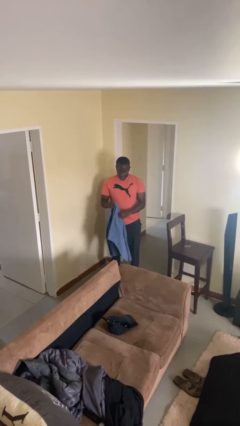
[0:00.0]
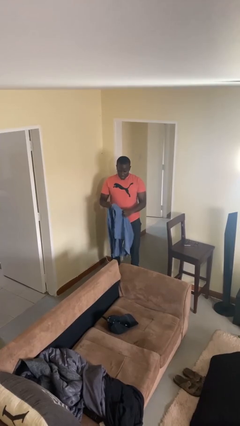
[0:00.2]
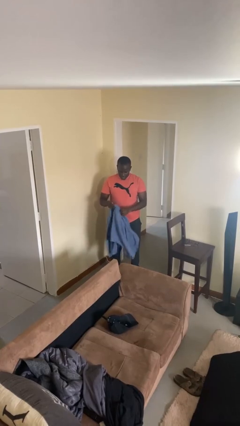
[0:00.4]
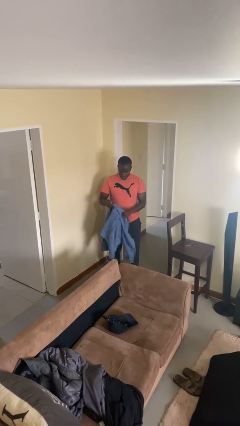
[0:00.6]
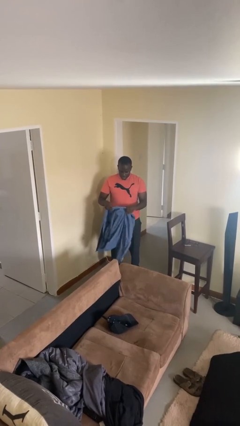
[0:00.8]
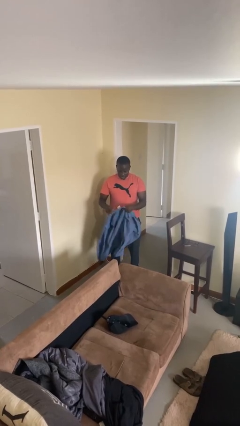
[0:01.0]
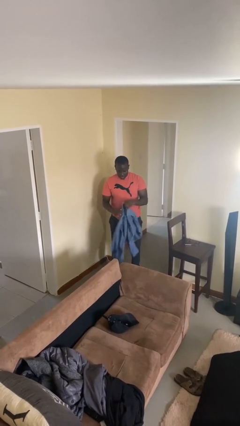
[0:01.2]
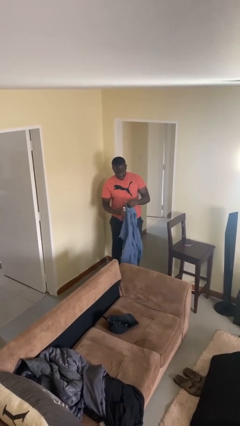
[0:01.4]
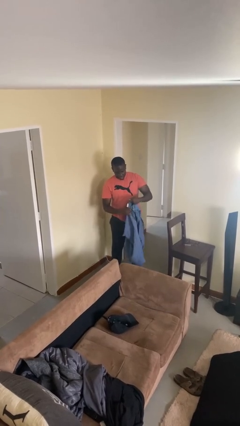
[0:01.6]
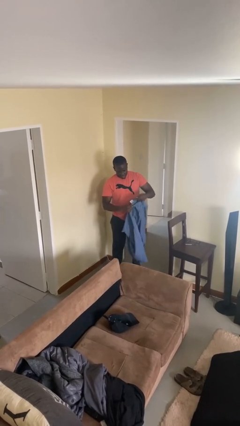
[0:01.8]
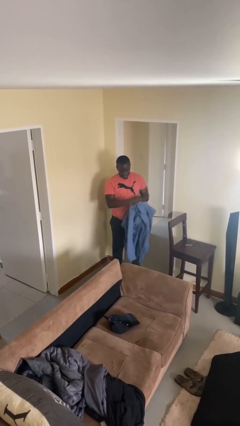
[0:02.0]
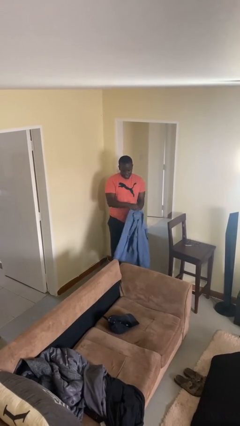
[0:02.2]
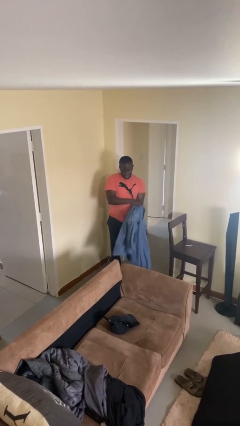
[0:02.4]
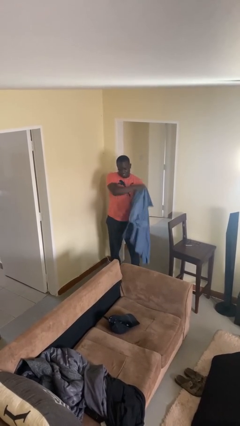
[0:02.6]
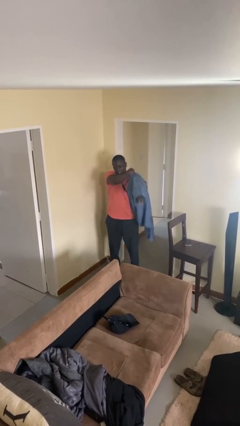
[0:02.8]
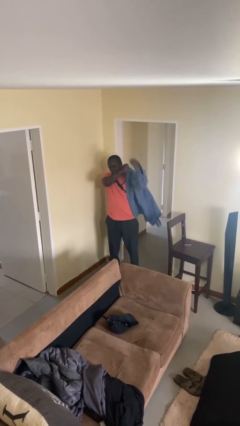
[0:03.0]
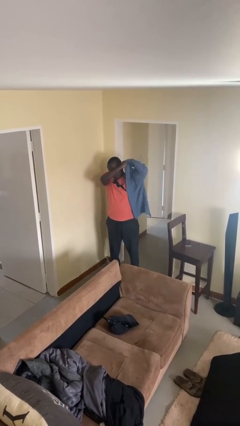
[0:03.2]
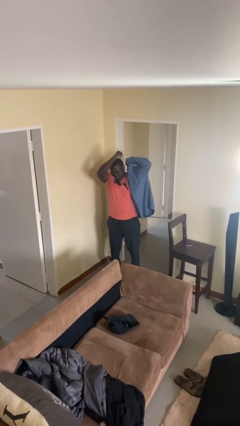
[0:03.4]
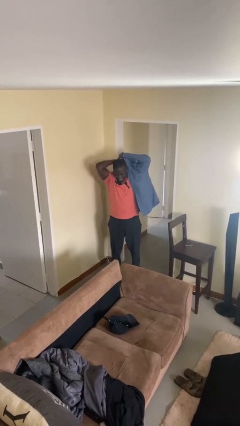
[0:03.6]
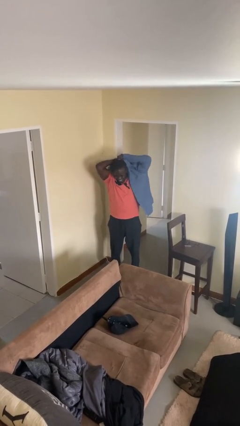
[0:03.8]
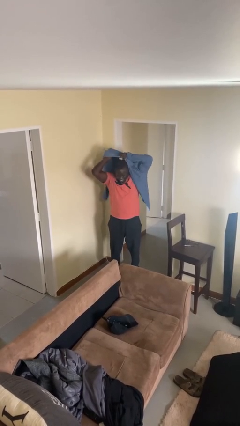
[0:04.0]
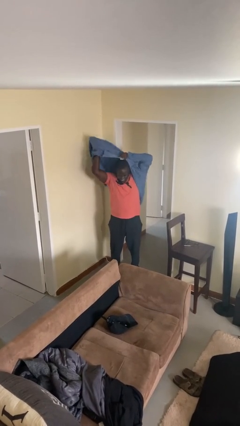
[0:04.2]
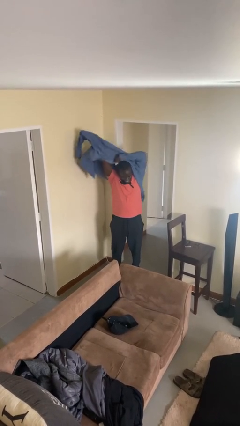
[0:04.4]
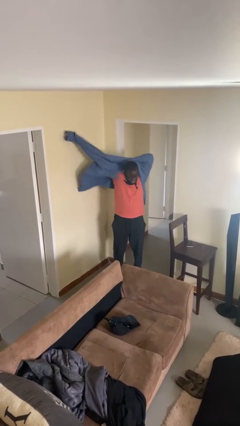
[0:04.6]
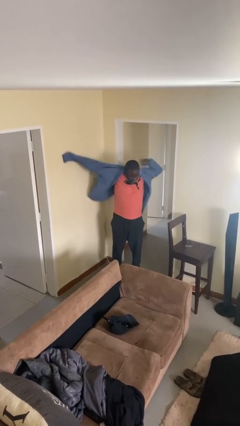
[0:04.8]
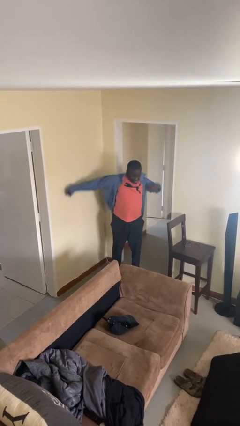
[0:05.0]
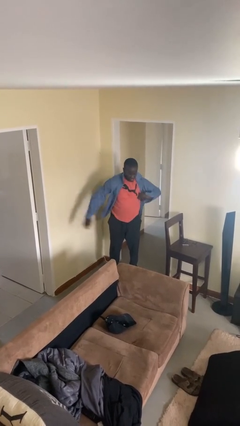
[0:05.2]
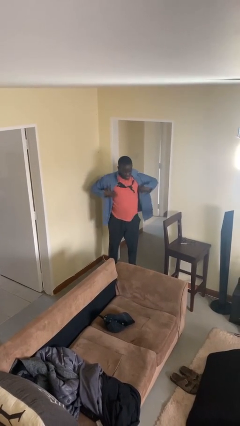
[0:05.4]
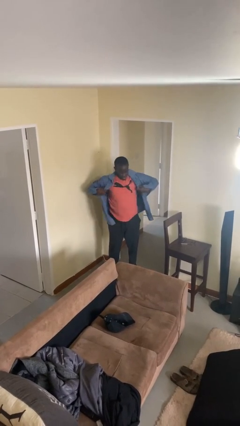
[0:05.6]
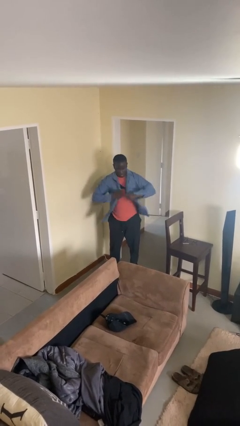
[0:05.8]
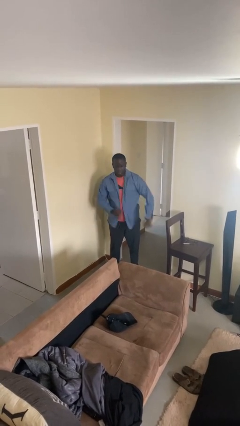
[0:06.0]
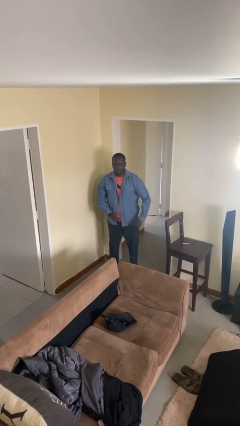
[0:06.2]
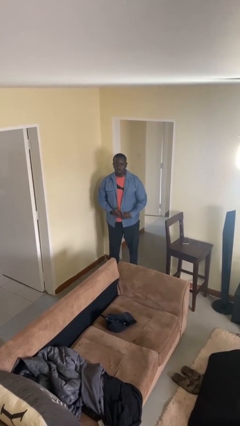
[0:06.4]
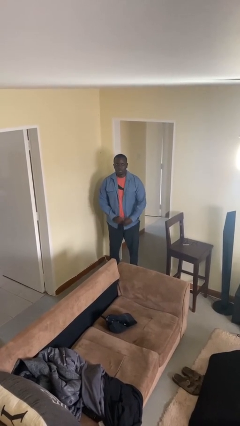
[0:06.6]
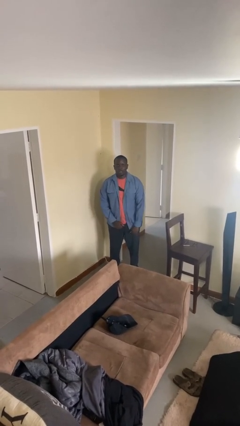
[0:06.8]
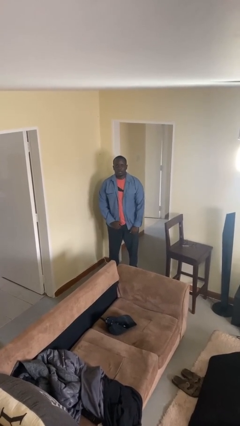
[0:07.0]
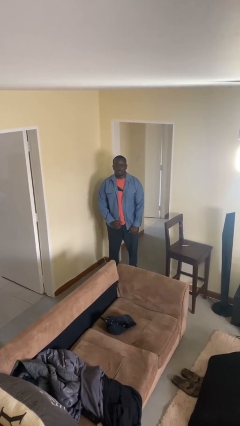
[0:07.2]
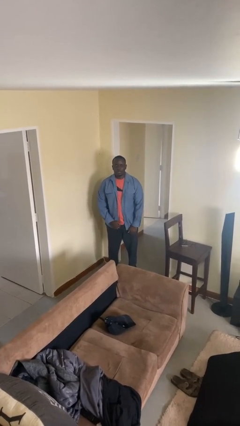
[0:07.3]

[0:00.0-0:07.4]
person puts on shirt

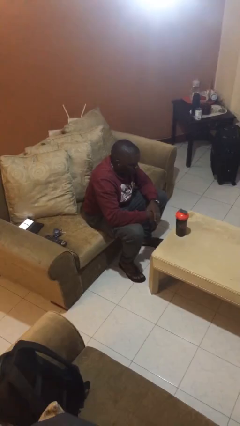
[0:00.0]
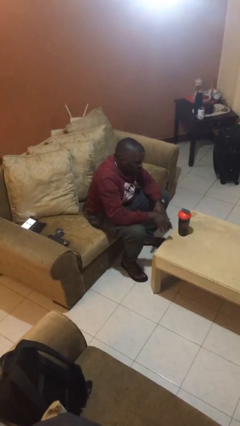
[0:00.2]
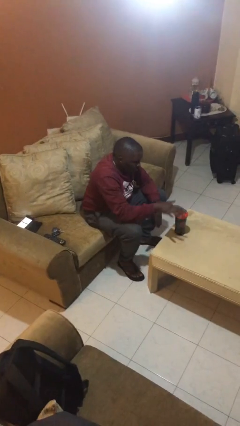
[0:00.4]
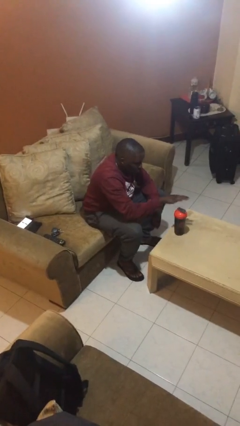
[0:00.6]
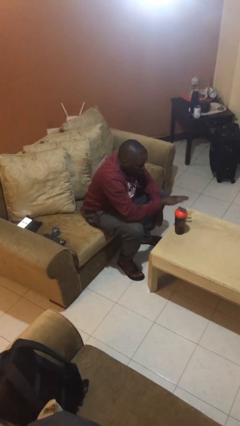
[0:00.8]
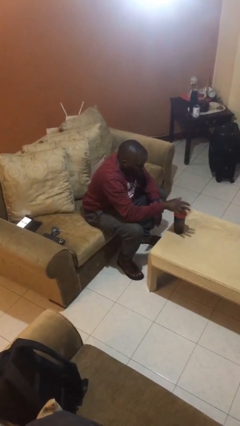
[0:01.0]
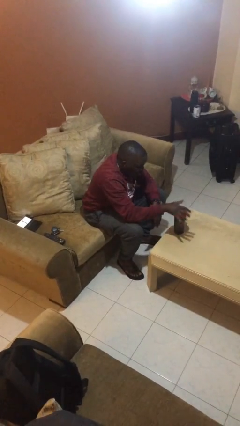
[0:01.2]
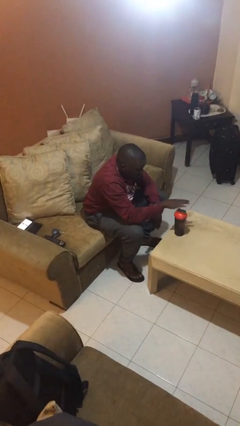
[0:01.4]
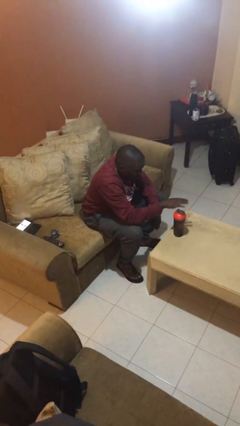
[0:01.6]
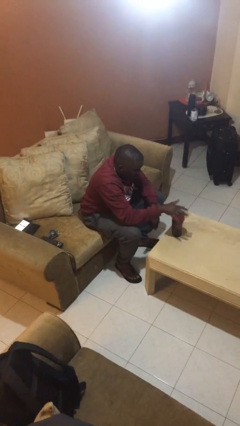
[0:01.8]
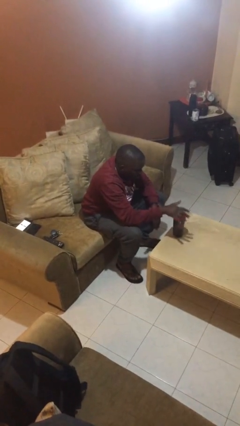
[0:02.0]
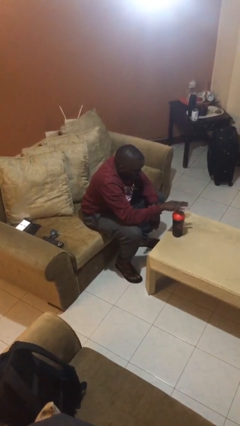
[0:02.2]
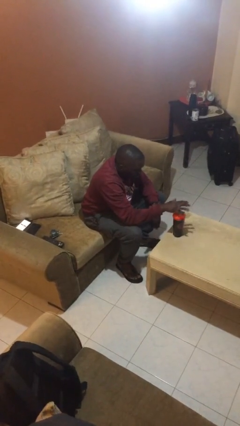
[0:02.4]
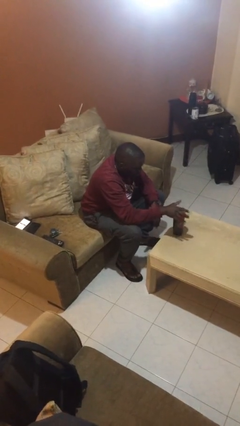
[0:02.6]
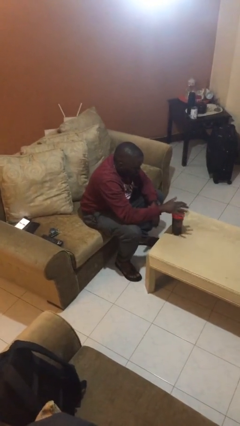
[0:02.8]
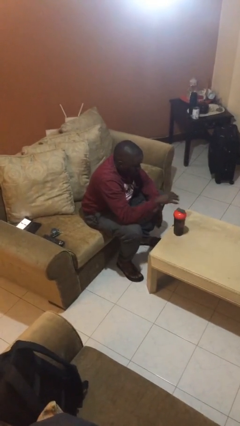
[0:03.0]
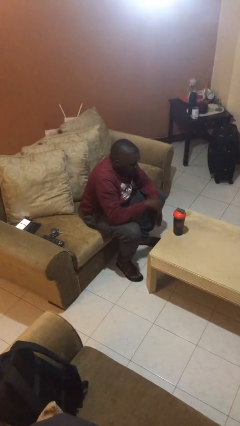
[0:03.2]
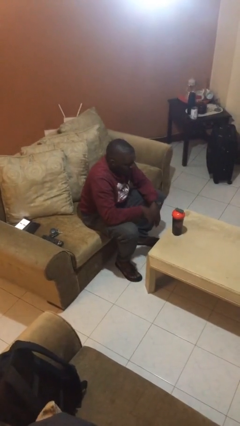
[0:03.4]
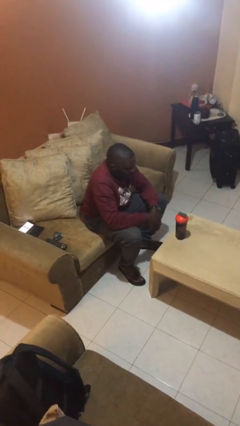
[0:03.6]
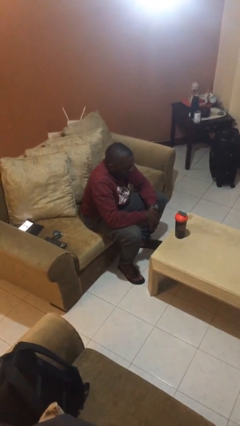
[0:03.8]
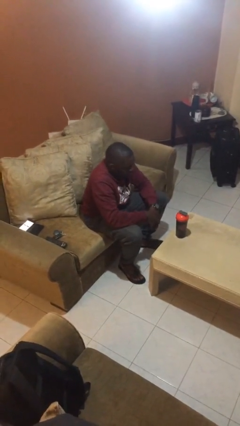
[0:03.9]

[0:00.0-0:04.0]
person waves hand over object

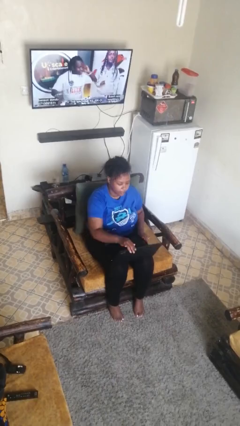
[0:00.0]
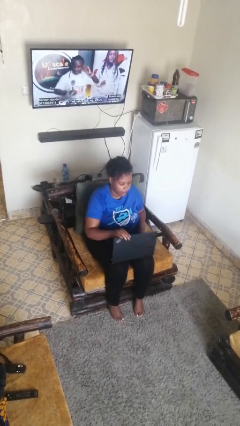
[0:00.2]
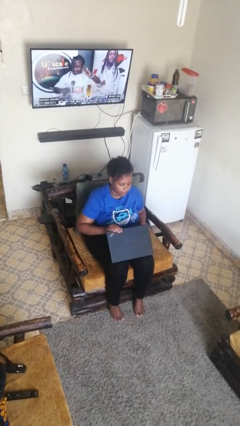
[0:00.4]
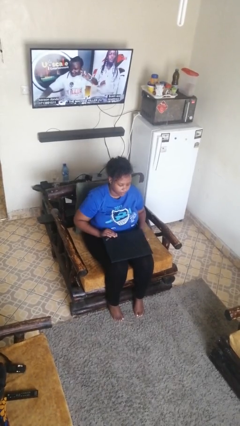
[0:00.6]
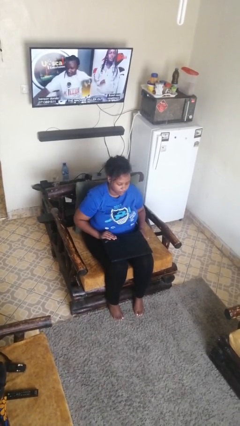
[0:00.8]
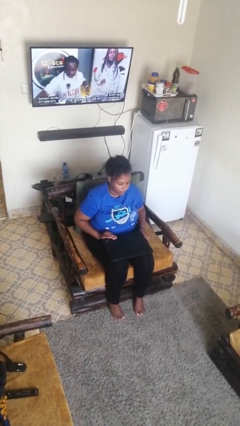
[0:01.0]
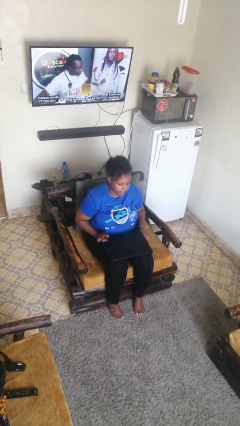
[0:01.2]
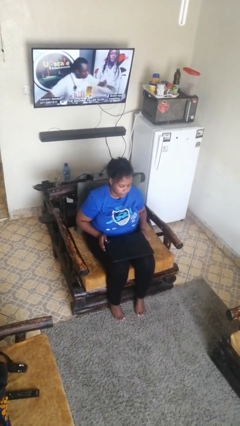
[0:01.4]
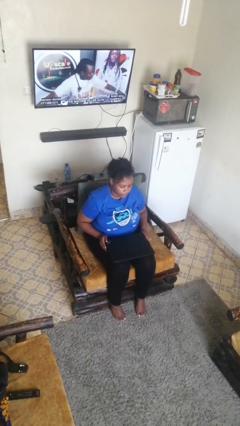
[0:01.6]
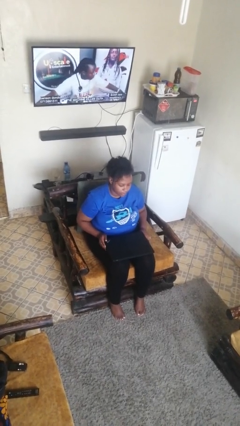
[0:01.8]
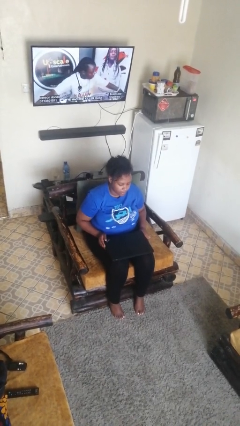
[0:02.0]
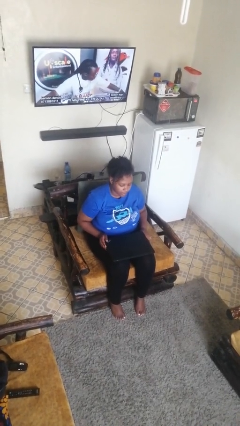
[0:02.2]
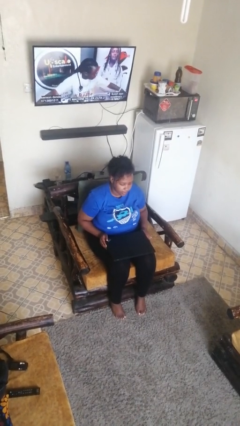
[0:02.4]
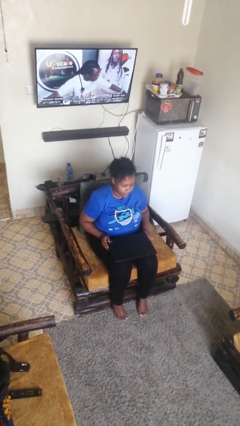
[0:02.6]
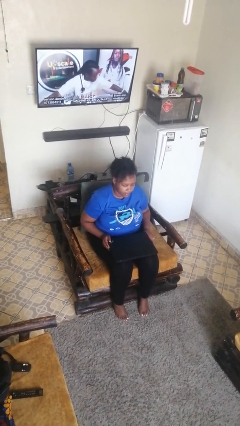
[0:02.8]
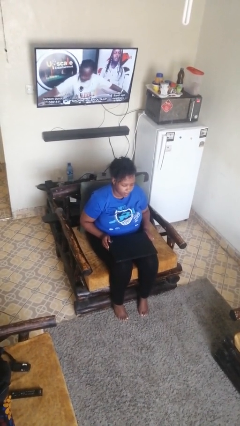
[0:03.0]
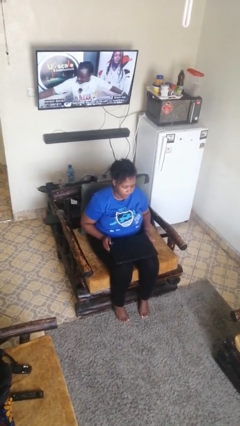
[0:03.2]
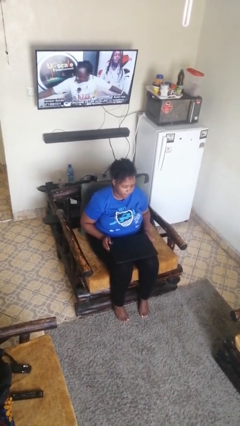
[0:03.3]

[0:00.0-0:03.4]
person closes laptop

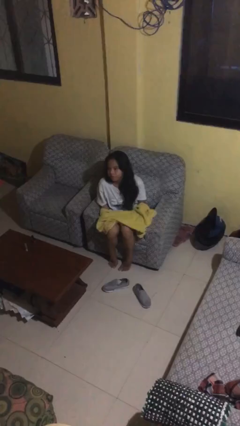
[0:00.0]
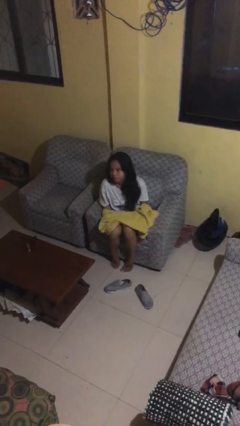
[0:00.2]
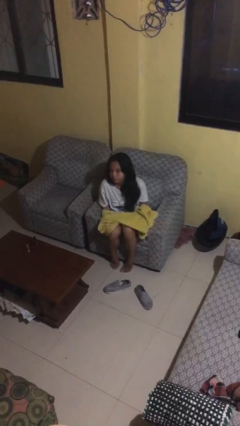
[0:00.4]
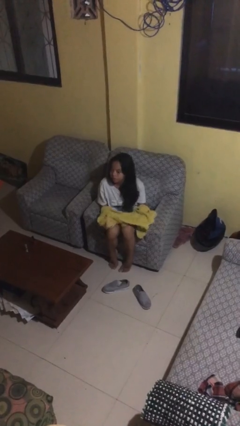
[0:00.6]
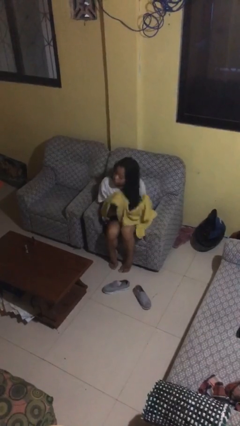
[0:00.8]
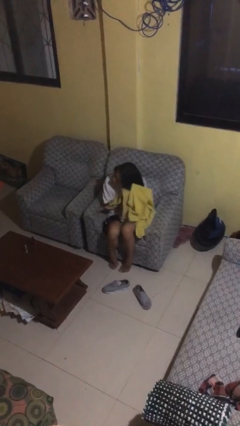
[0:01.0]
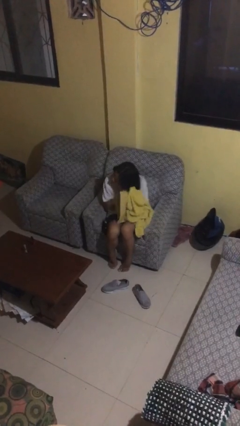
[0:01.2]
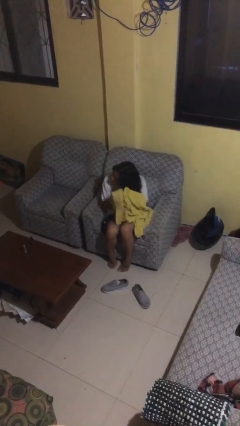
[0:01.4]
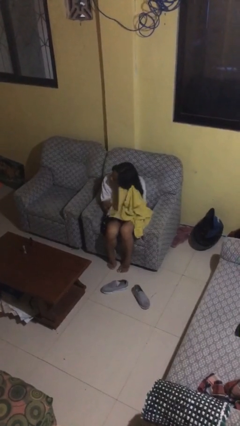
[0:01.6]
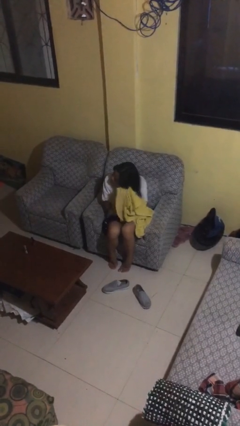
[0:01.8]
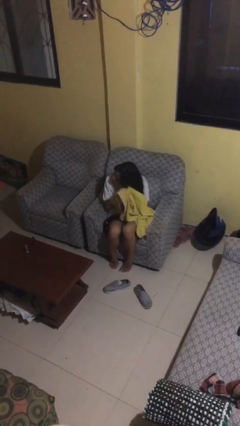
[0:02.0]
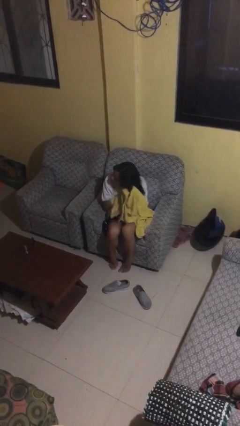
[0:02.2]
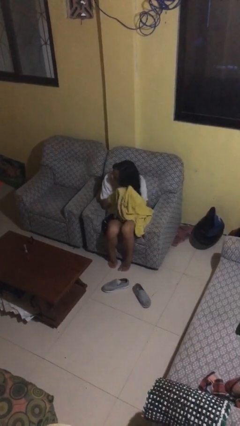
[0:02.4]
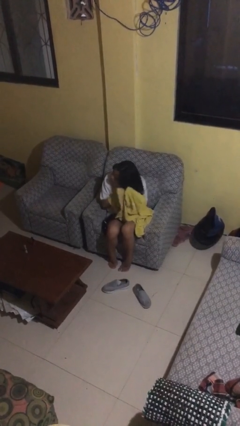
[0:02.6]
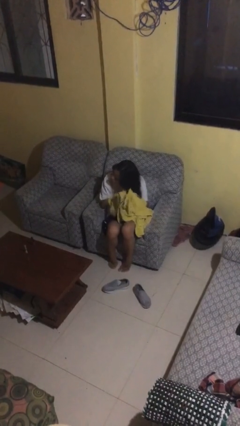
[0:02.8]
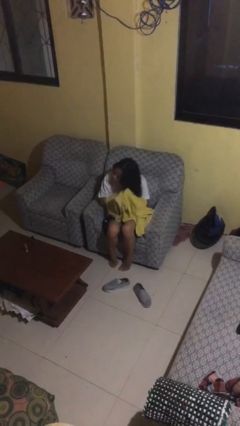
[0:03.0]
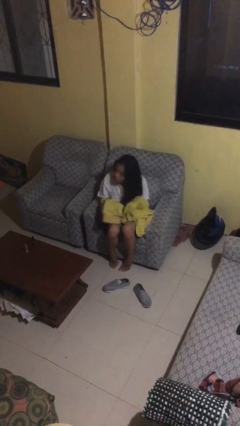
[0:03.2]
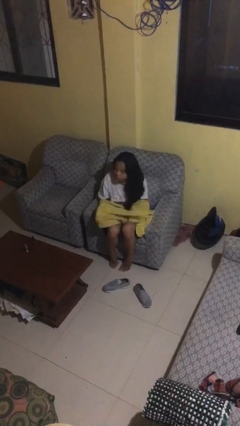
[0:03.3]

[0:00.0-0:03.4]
person dries hair with towel
